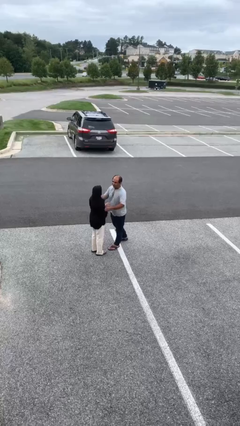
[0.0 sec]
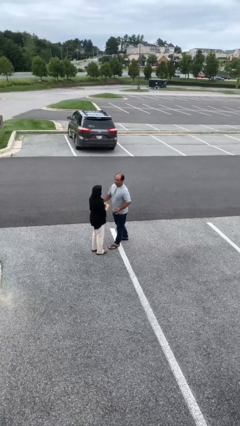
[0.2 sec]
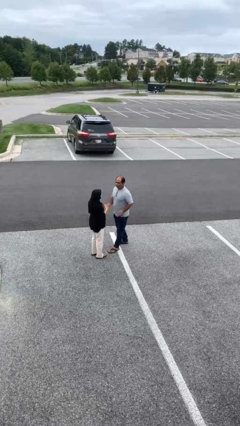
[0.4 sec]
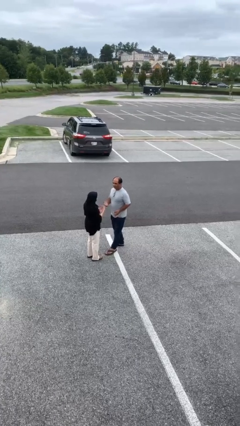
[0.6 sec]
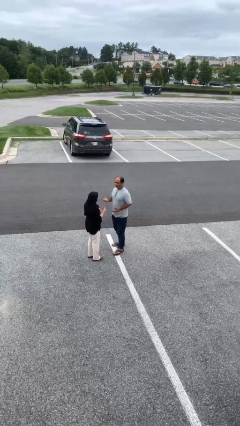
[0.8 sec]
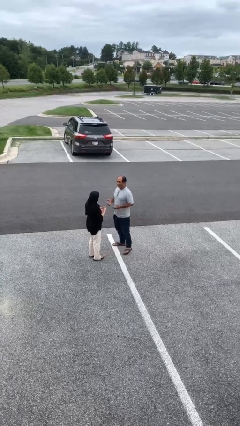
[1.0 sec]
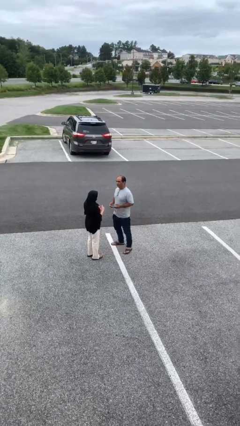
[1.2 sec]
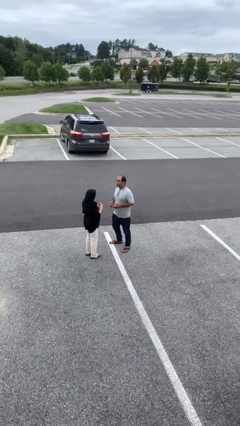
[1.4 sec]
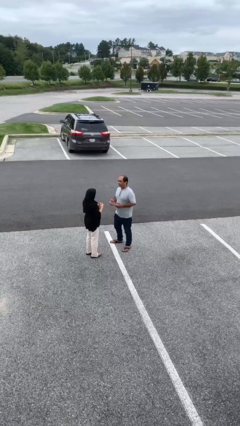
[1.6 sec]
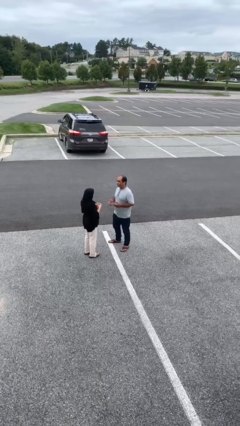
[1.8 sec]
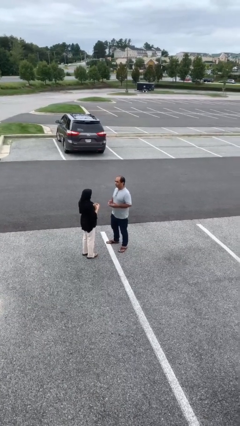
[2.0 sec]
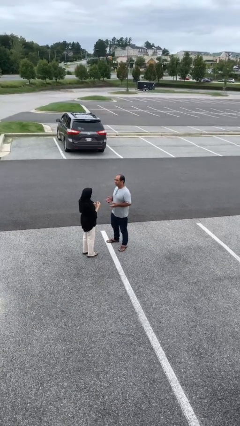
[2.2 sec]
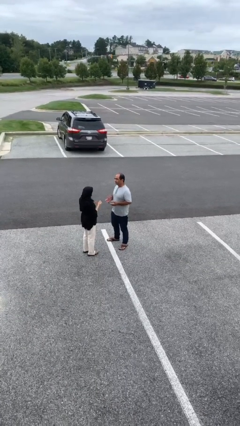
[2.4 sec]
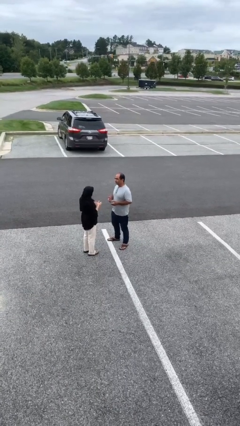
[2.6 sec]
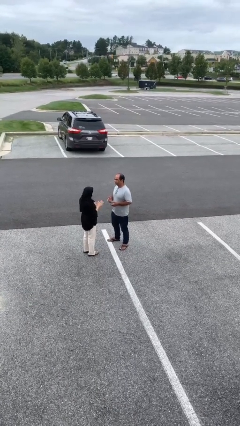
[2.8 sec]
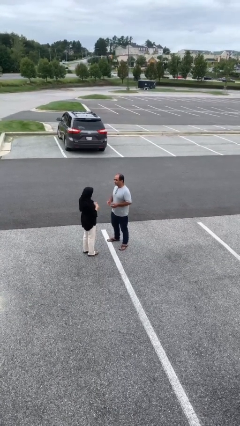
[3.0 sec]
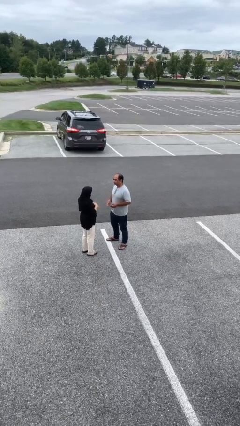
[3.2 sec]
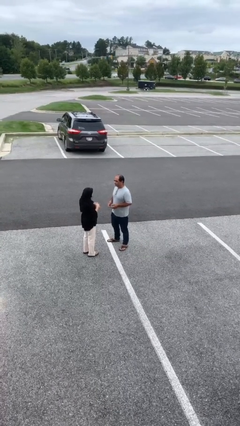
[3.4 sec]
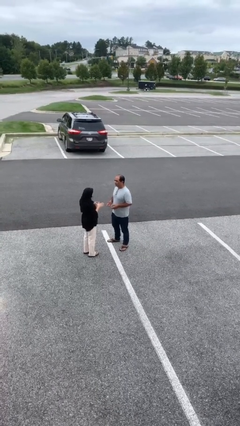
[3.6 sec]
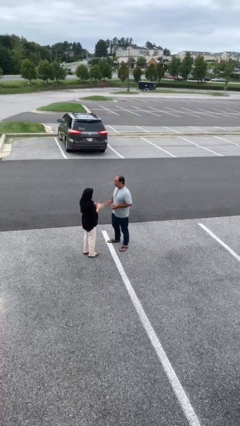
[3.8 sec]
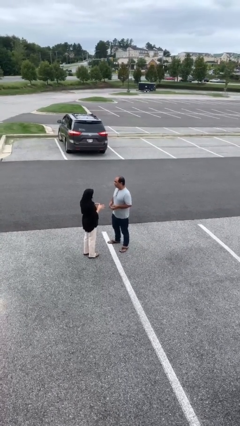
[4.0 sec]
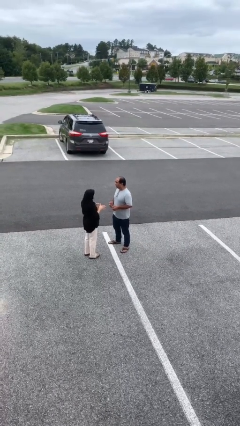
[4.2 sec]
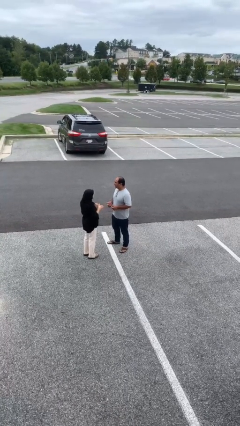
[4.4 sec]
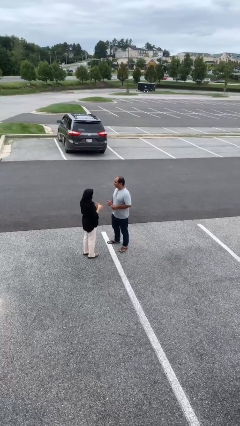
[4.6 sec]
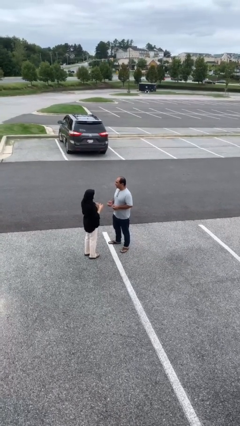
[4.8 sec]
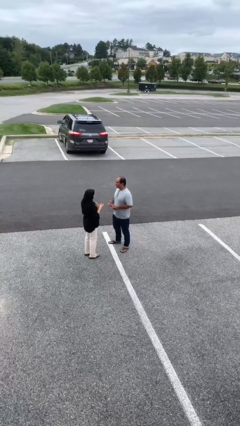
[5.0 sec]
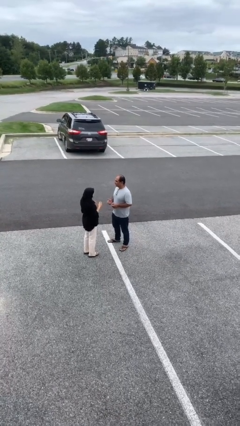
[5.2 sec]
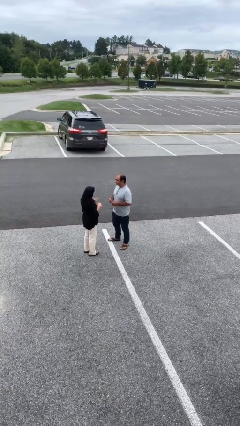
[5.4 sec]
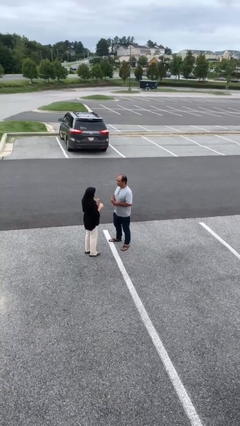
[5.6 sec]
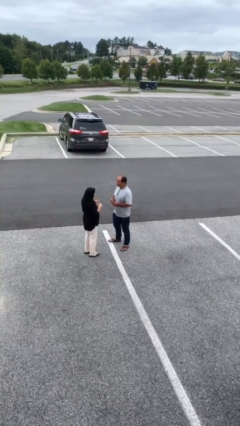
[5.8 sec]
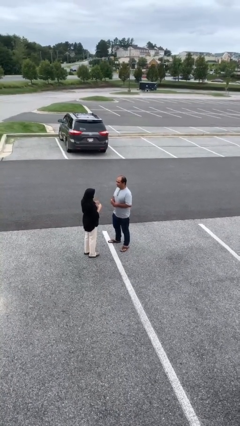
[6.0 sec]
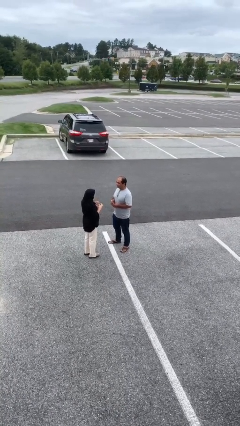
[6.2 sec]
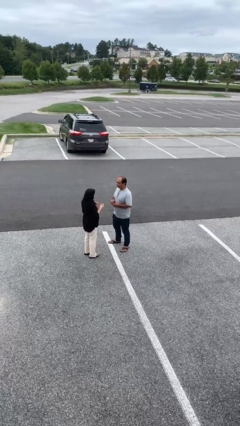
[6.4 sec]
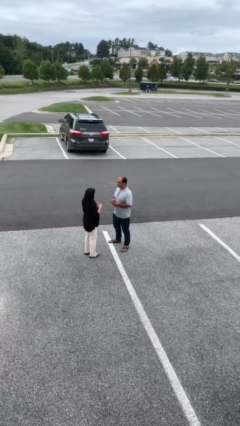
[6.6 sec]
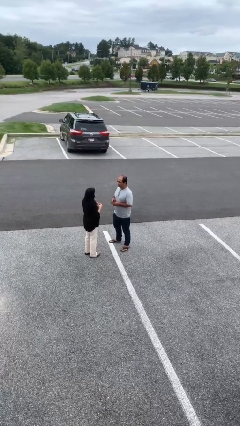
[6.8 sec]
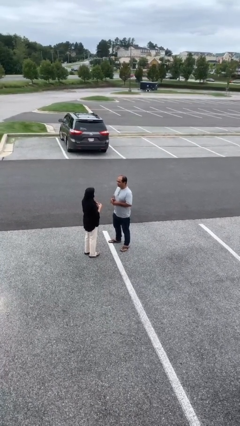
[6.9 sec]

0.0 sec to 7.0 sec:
person talks to person

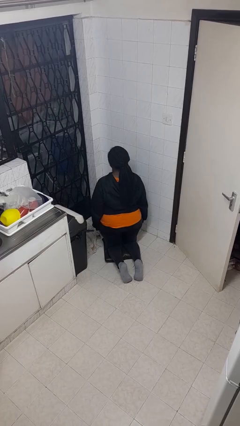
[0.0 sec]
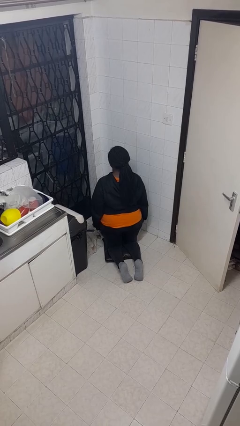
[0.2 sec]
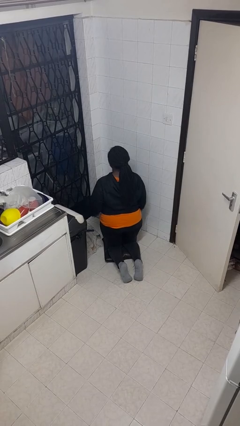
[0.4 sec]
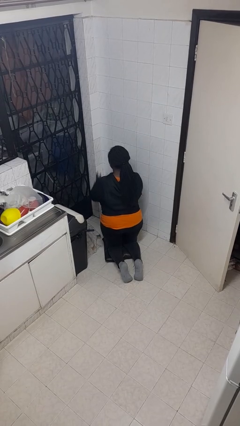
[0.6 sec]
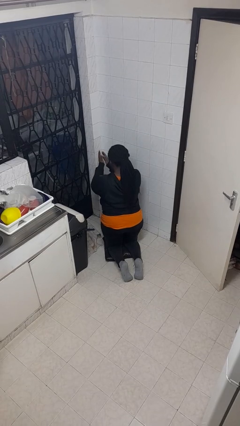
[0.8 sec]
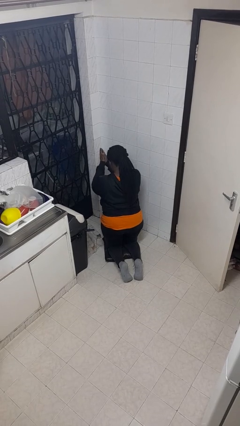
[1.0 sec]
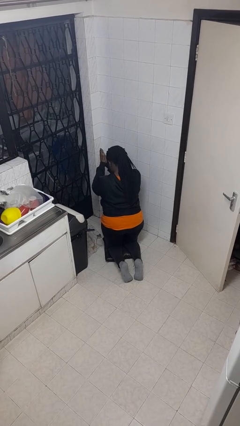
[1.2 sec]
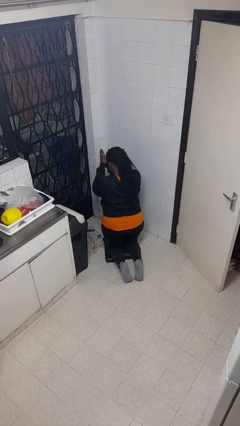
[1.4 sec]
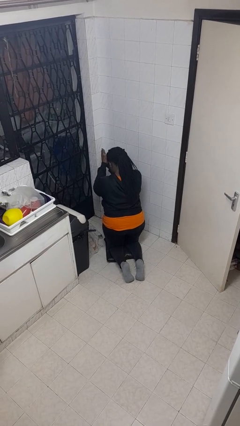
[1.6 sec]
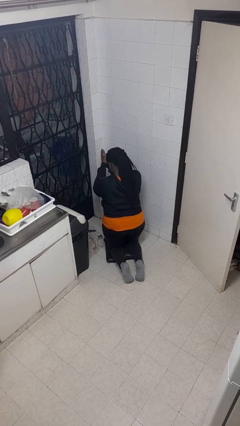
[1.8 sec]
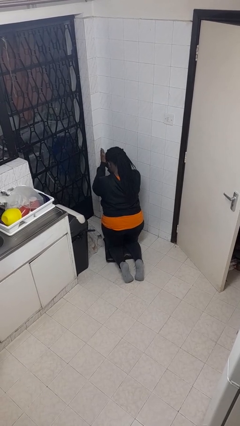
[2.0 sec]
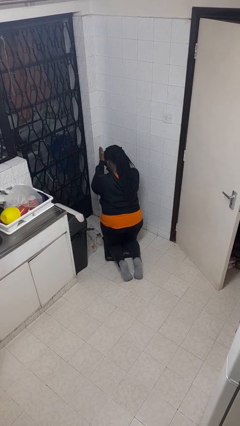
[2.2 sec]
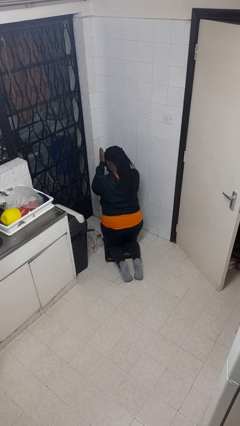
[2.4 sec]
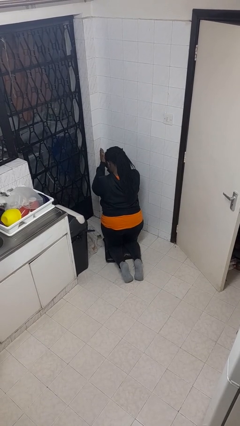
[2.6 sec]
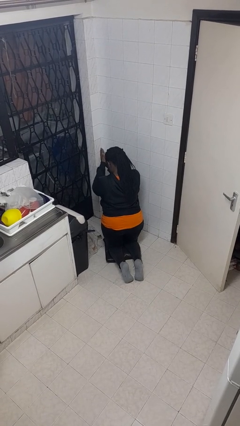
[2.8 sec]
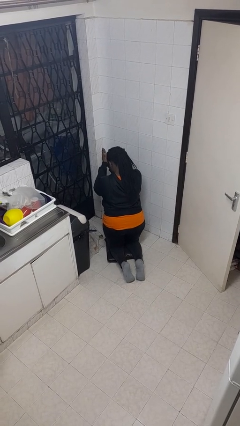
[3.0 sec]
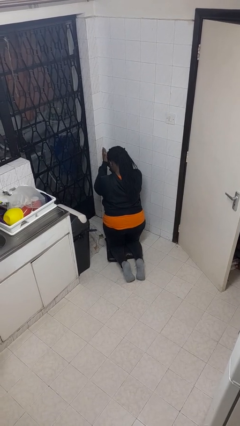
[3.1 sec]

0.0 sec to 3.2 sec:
person prays

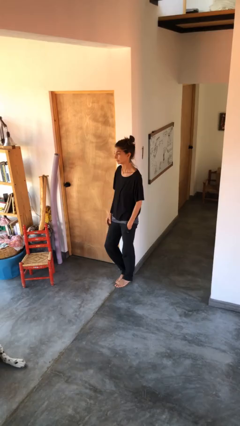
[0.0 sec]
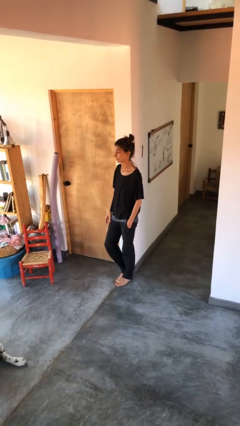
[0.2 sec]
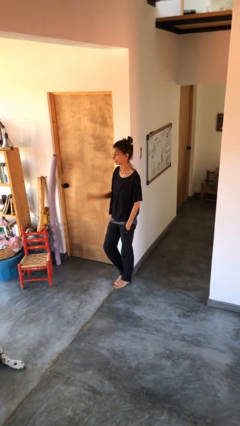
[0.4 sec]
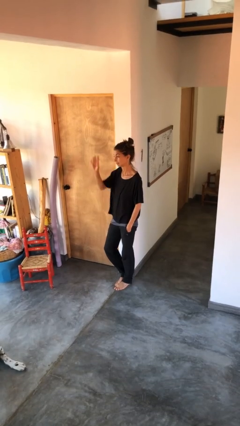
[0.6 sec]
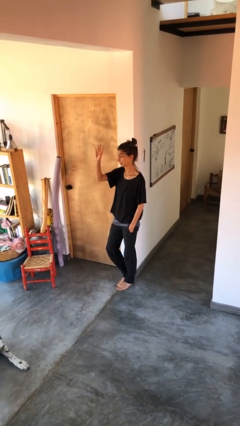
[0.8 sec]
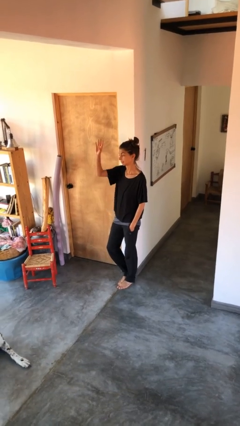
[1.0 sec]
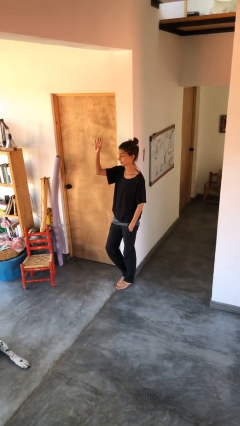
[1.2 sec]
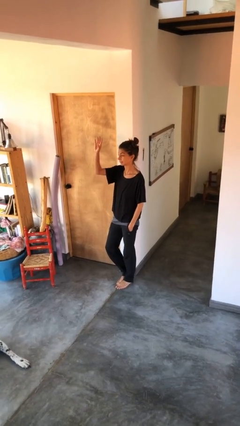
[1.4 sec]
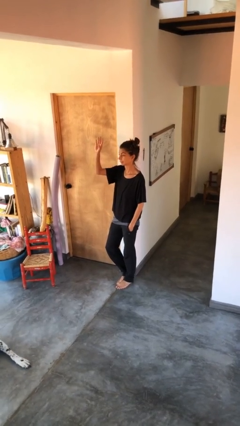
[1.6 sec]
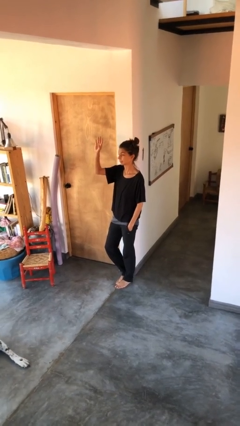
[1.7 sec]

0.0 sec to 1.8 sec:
person gestures raise hand

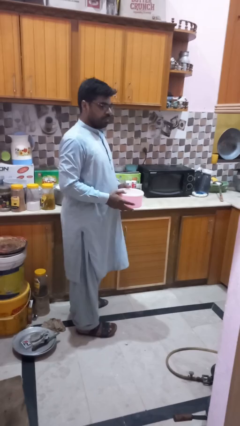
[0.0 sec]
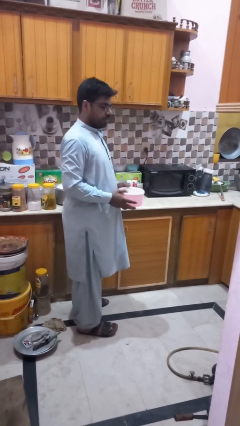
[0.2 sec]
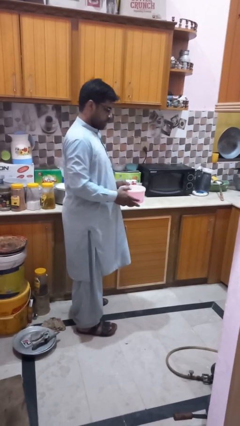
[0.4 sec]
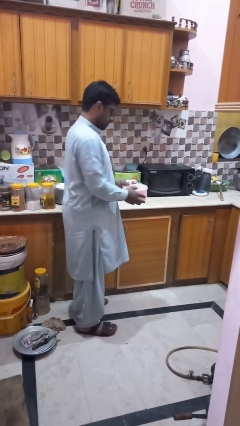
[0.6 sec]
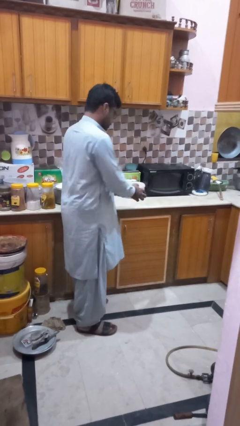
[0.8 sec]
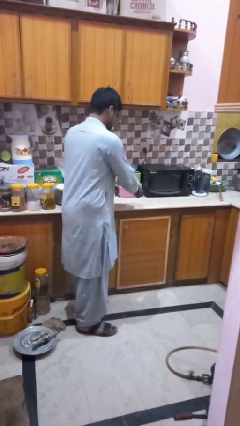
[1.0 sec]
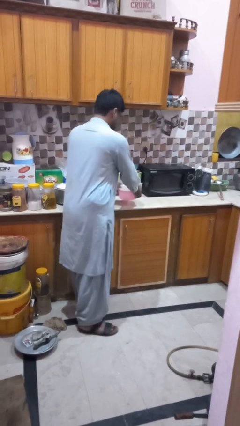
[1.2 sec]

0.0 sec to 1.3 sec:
person puts down object on countertop

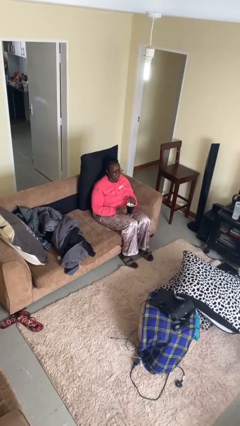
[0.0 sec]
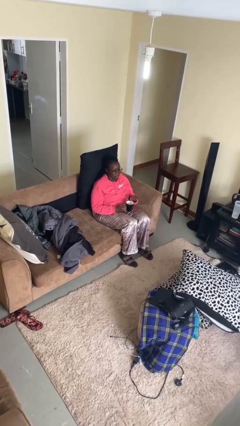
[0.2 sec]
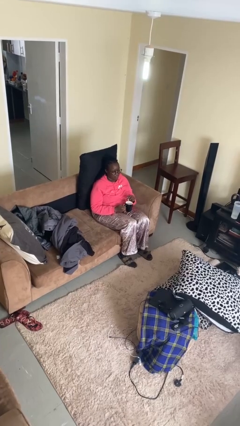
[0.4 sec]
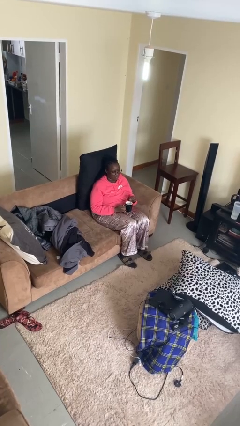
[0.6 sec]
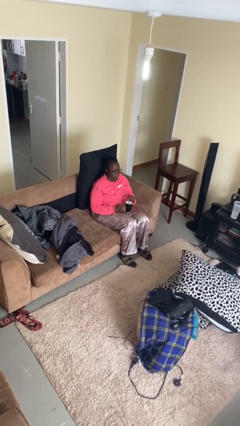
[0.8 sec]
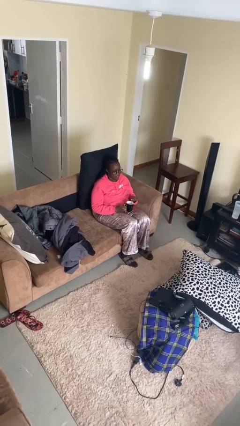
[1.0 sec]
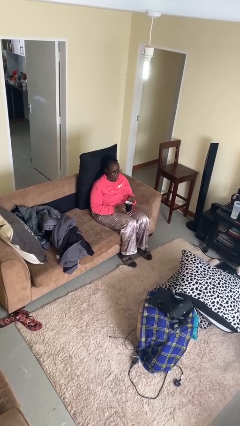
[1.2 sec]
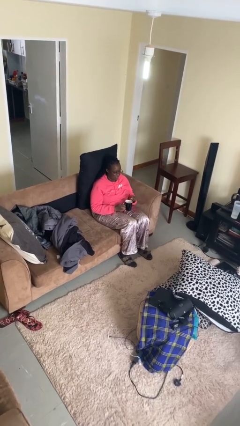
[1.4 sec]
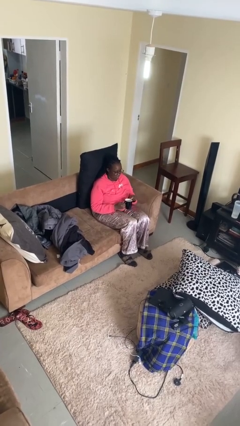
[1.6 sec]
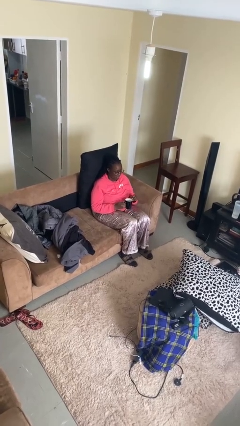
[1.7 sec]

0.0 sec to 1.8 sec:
person stirs mug

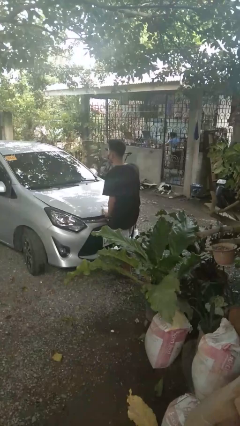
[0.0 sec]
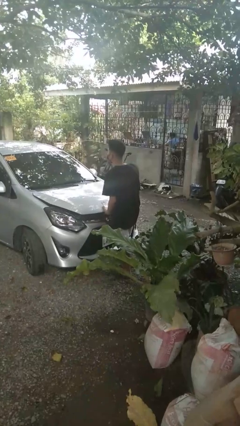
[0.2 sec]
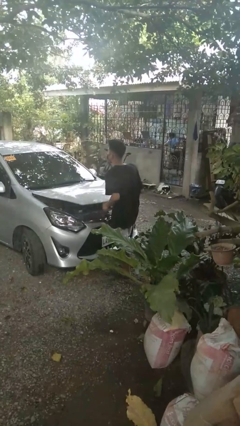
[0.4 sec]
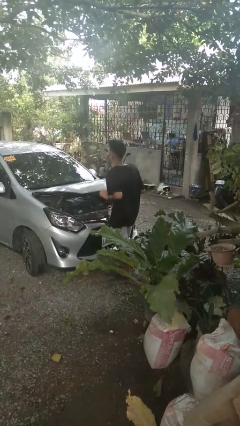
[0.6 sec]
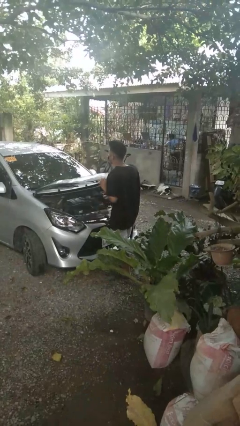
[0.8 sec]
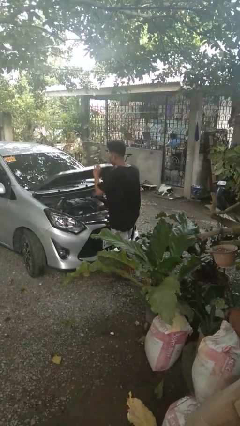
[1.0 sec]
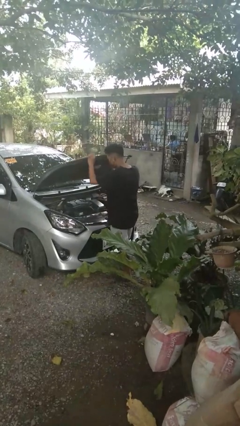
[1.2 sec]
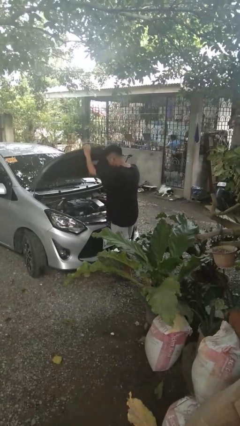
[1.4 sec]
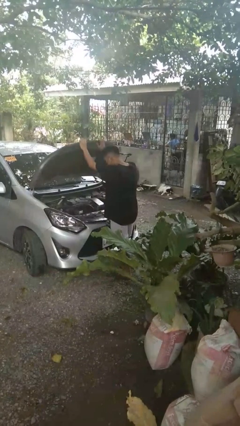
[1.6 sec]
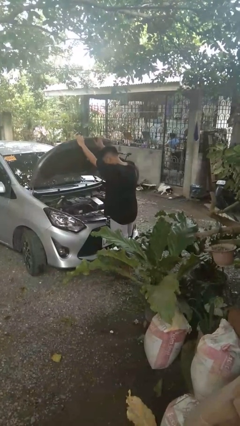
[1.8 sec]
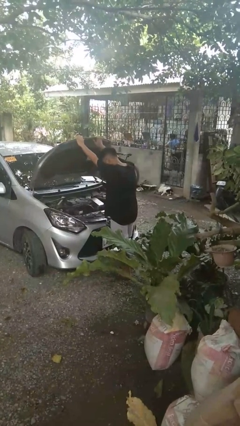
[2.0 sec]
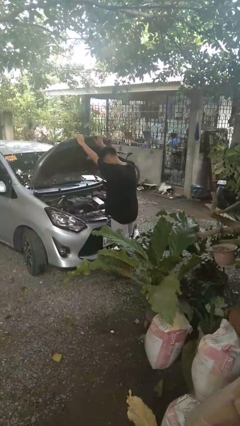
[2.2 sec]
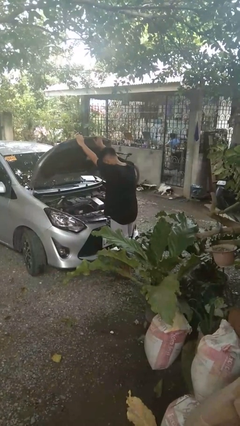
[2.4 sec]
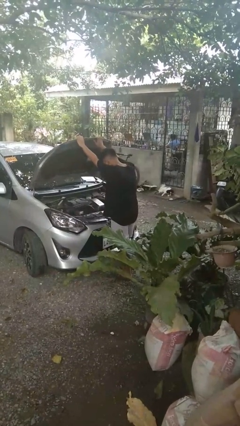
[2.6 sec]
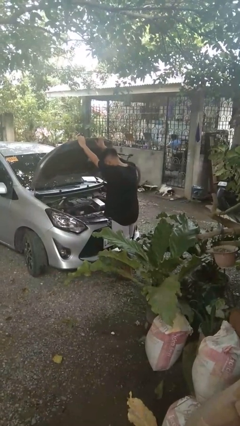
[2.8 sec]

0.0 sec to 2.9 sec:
person opens car hood
